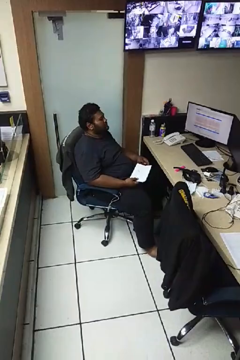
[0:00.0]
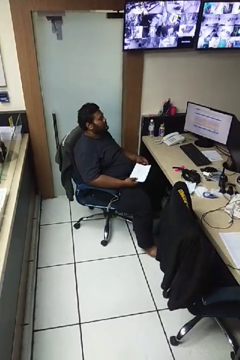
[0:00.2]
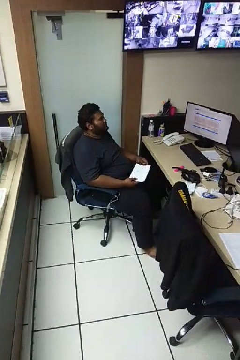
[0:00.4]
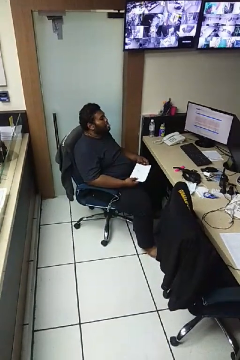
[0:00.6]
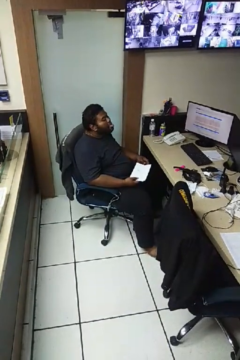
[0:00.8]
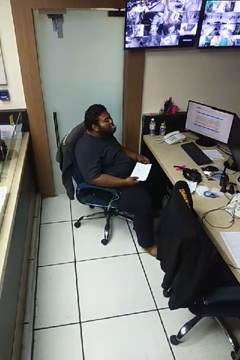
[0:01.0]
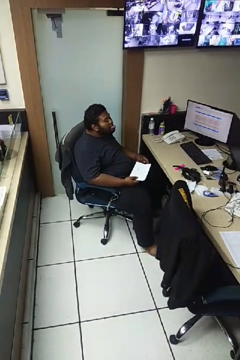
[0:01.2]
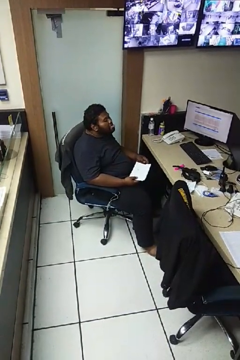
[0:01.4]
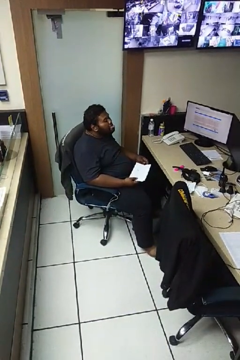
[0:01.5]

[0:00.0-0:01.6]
person sticks out tongue

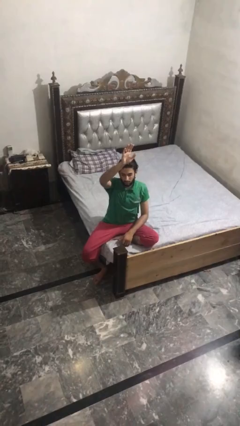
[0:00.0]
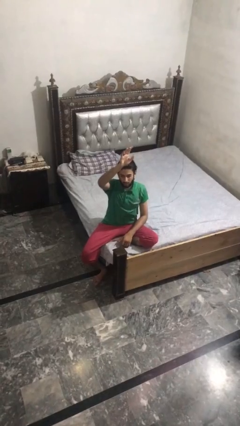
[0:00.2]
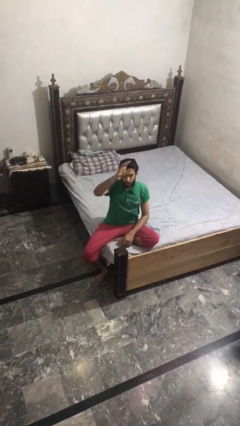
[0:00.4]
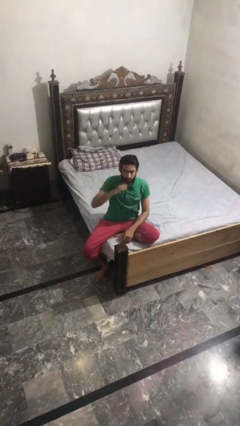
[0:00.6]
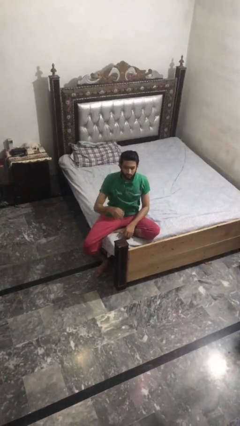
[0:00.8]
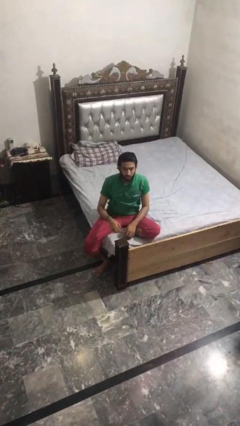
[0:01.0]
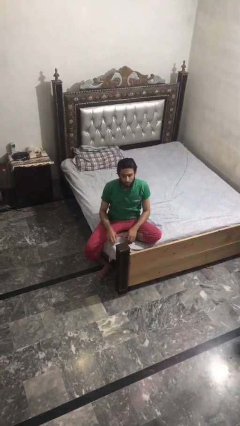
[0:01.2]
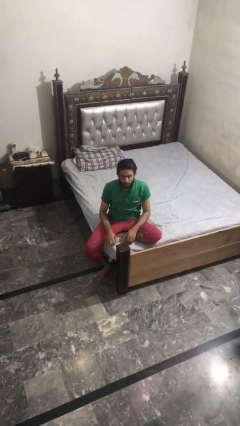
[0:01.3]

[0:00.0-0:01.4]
person gestures lower hand

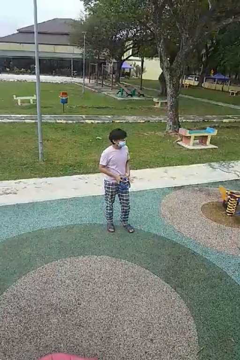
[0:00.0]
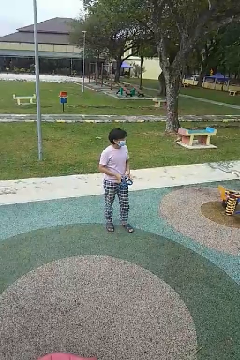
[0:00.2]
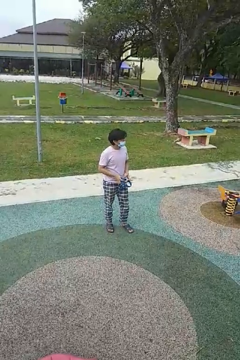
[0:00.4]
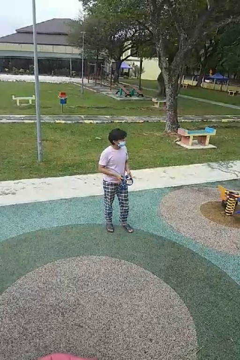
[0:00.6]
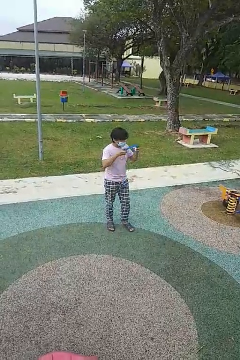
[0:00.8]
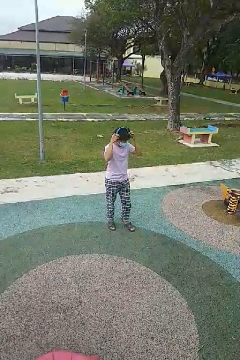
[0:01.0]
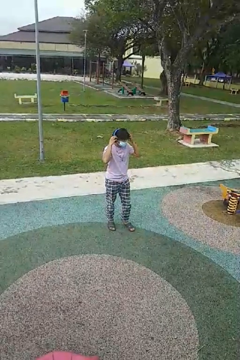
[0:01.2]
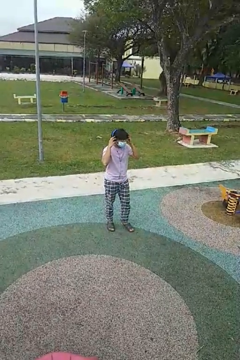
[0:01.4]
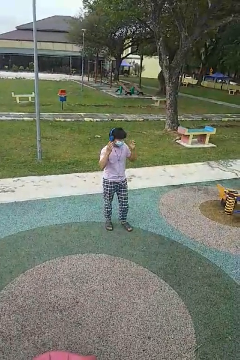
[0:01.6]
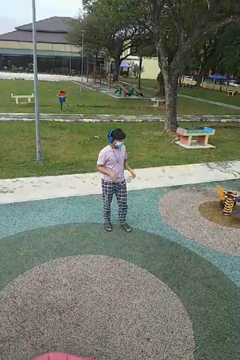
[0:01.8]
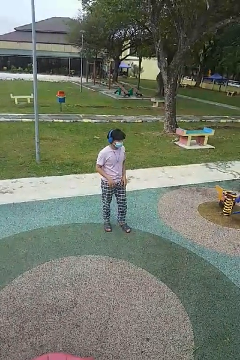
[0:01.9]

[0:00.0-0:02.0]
person puts on headphones

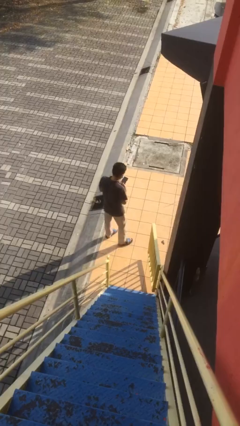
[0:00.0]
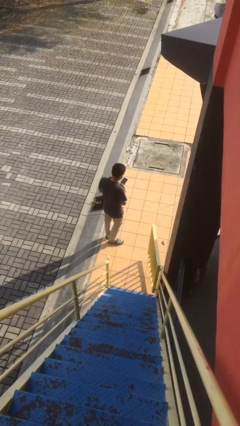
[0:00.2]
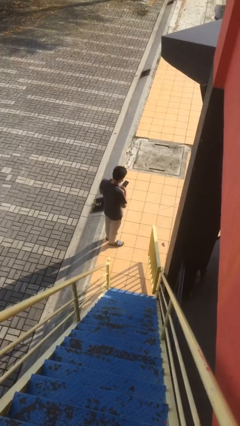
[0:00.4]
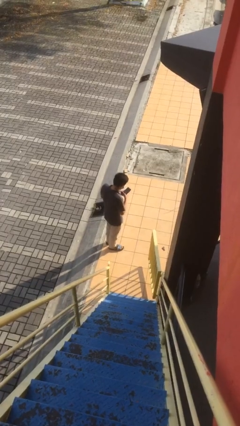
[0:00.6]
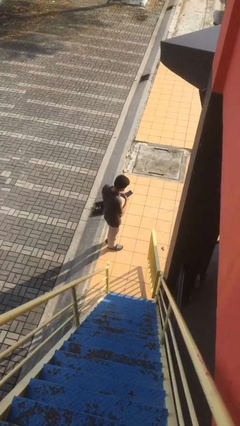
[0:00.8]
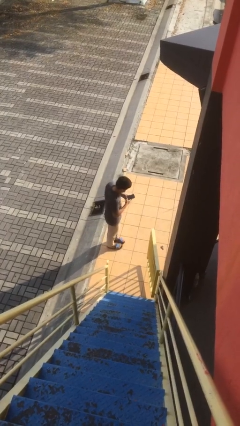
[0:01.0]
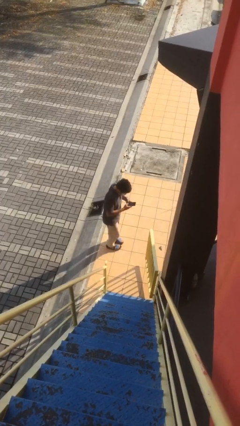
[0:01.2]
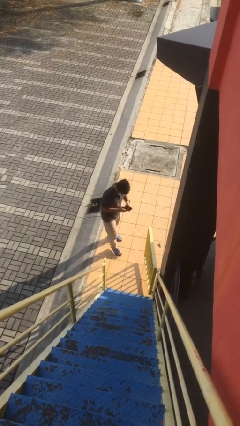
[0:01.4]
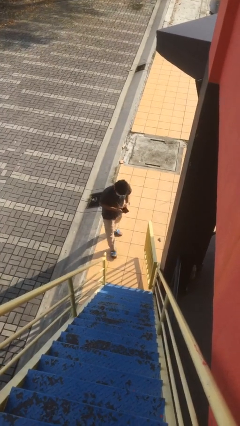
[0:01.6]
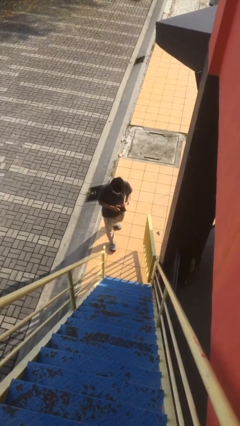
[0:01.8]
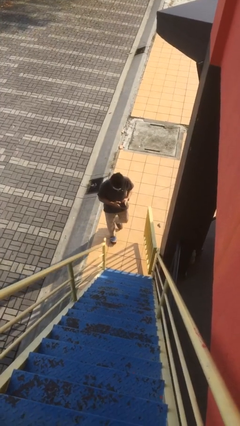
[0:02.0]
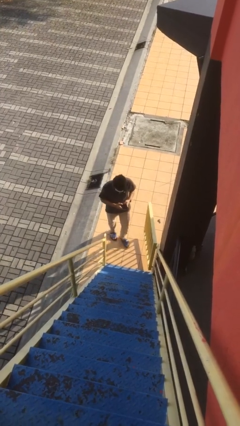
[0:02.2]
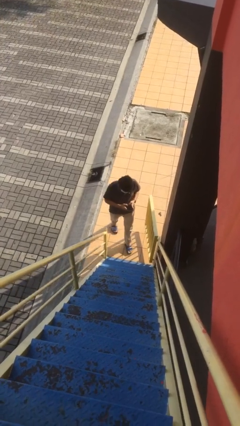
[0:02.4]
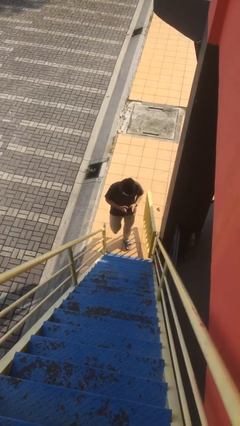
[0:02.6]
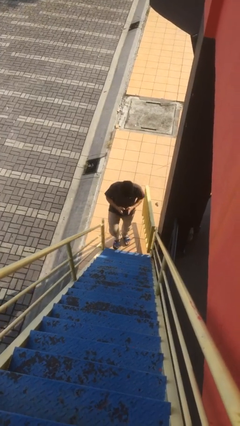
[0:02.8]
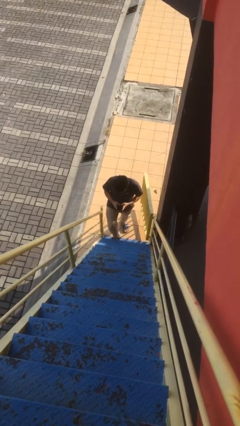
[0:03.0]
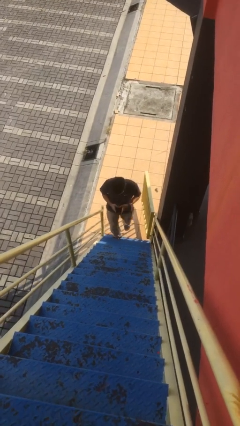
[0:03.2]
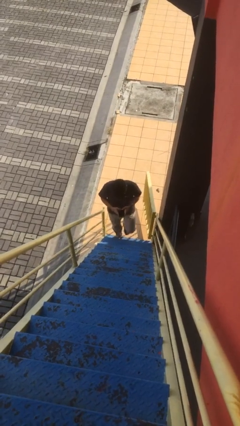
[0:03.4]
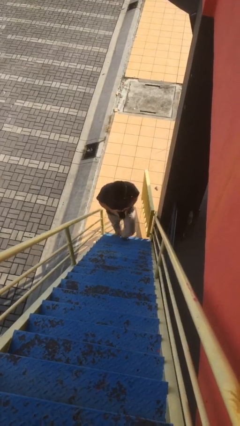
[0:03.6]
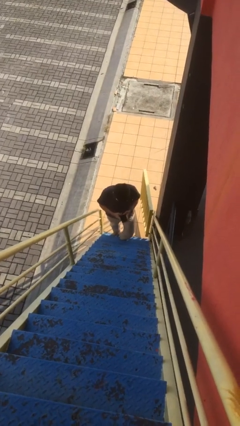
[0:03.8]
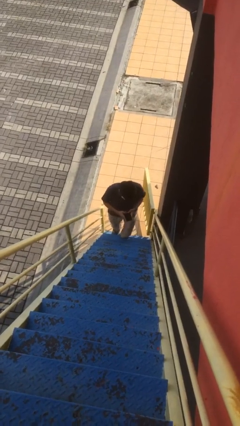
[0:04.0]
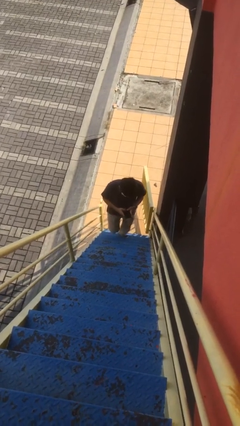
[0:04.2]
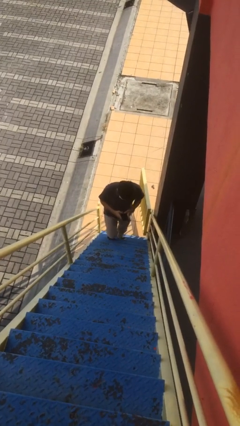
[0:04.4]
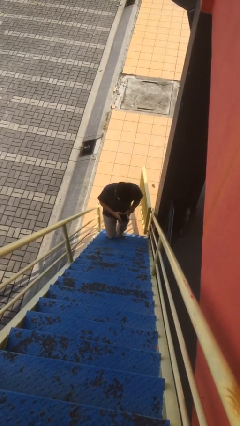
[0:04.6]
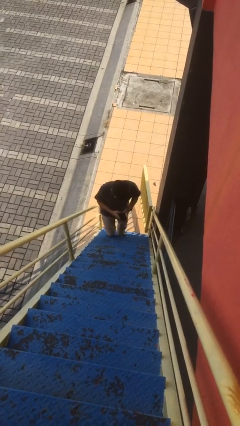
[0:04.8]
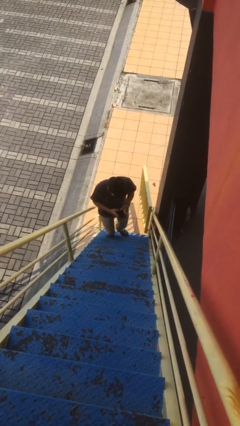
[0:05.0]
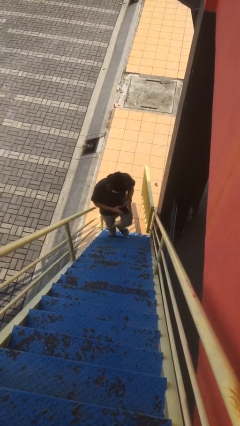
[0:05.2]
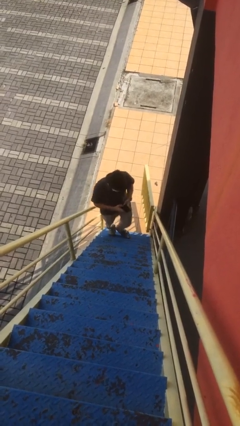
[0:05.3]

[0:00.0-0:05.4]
person enters scene through structure

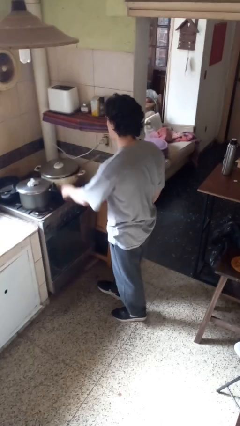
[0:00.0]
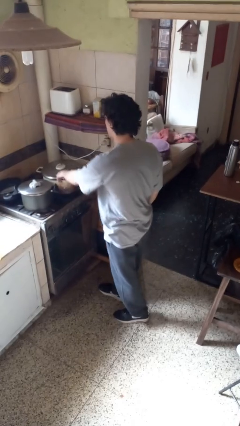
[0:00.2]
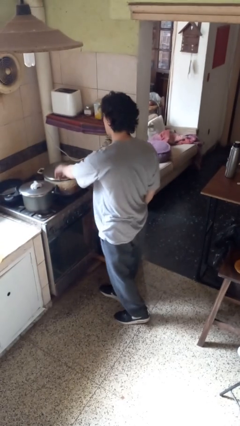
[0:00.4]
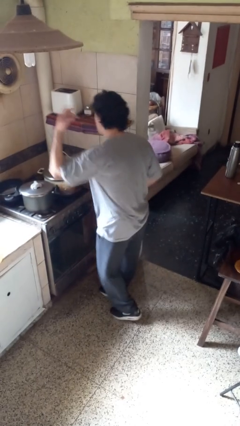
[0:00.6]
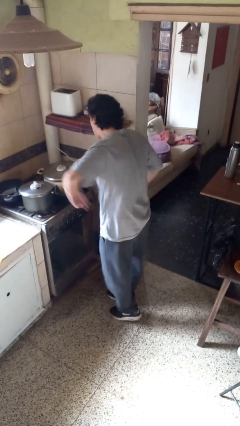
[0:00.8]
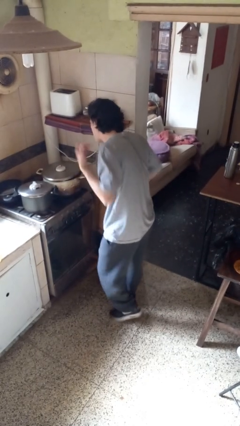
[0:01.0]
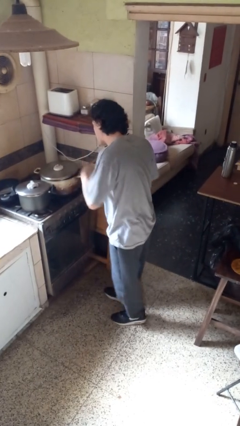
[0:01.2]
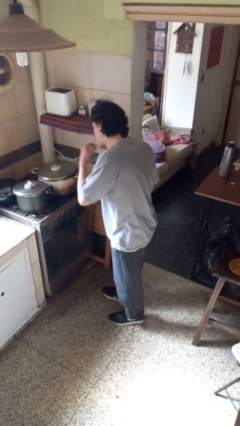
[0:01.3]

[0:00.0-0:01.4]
person burns hand

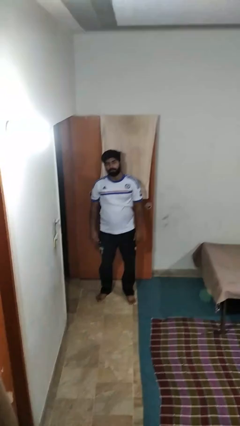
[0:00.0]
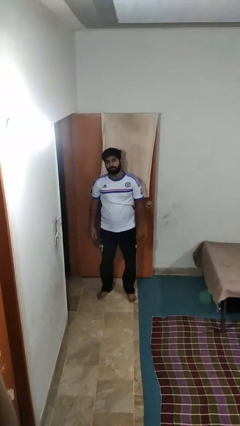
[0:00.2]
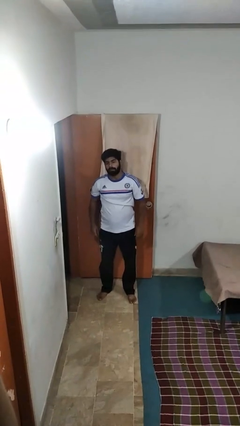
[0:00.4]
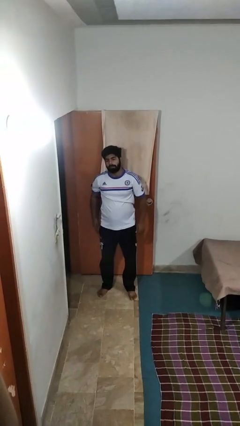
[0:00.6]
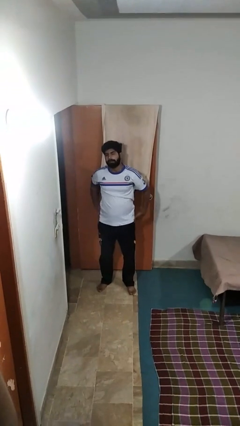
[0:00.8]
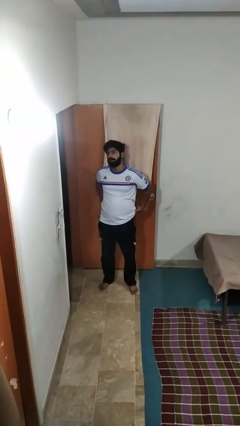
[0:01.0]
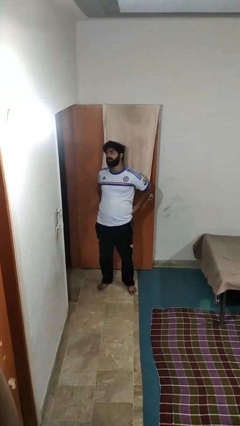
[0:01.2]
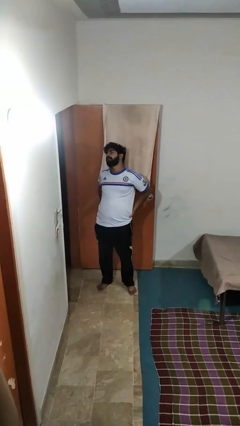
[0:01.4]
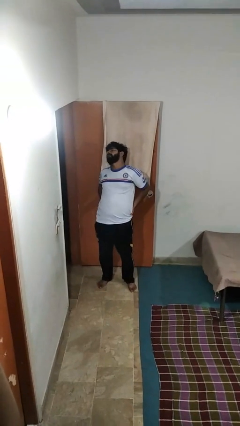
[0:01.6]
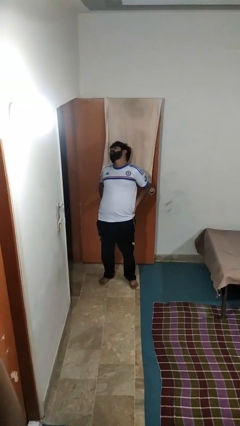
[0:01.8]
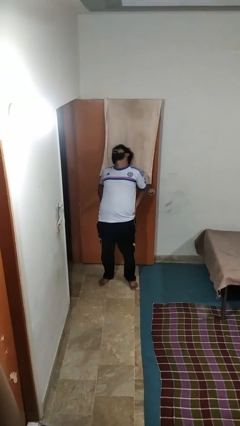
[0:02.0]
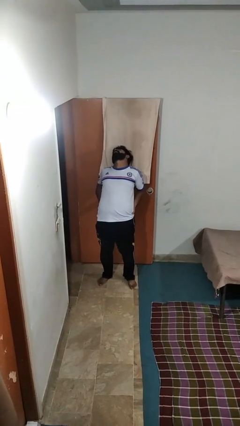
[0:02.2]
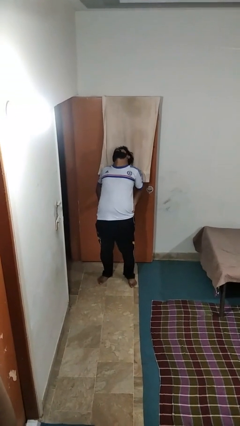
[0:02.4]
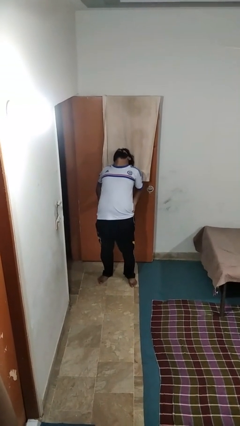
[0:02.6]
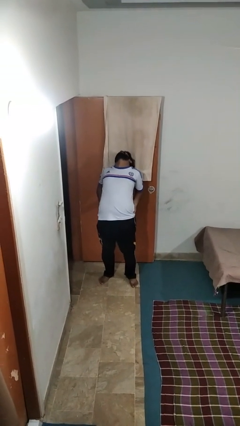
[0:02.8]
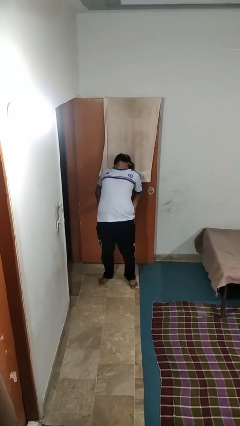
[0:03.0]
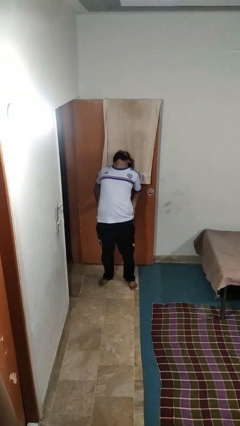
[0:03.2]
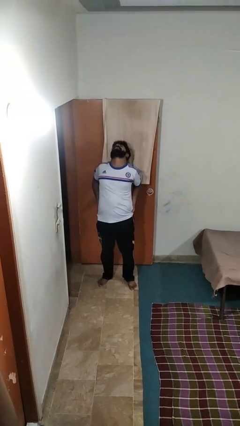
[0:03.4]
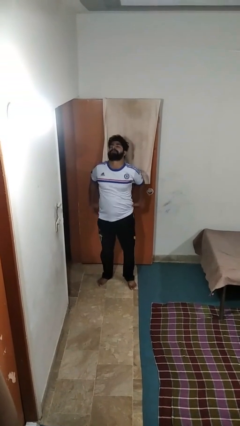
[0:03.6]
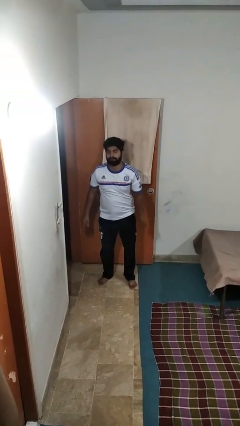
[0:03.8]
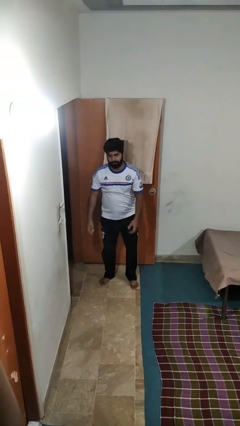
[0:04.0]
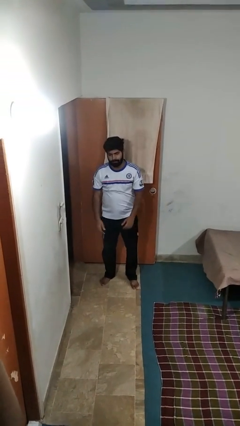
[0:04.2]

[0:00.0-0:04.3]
person stretches back

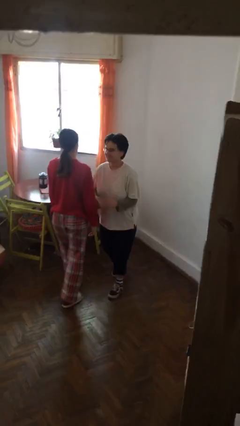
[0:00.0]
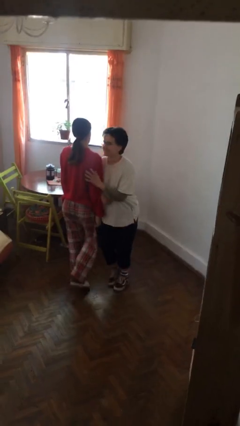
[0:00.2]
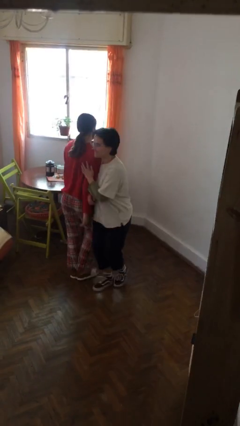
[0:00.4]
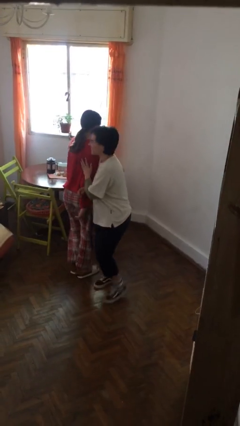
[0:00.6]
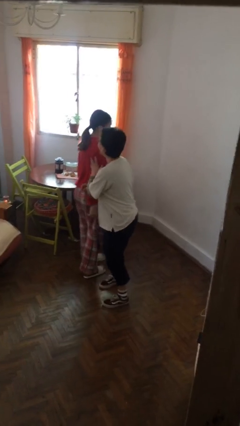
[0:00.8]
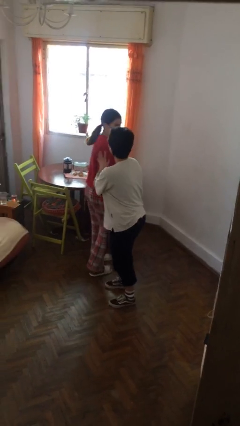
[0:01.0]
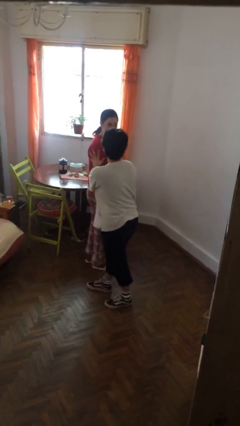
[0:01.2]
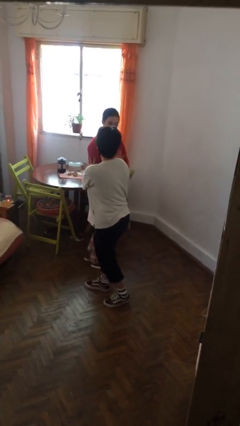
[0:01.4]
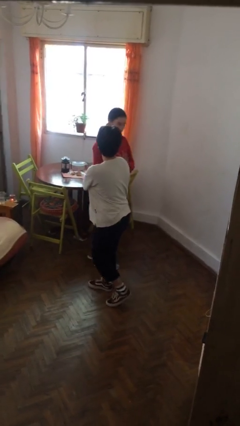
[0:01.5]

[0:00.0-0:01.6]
person bumps into person
